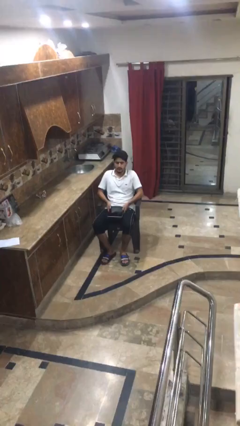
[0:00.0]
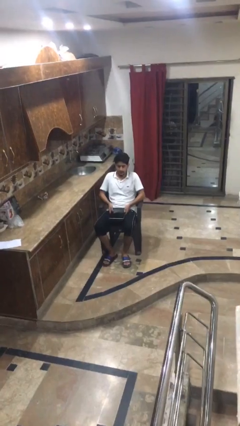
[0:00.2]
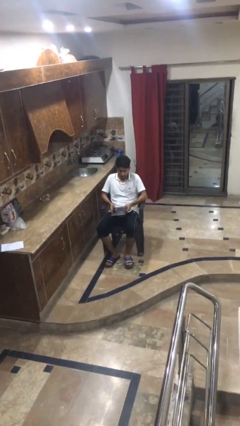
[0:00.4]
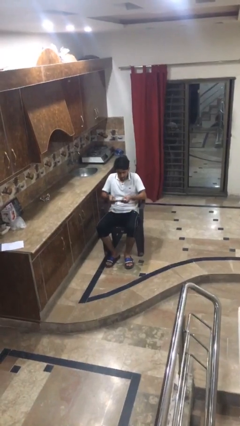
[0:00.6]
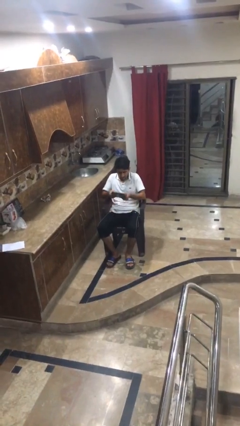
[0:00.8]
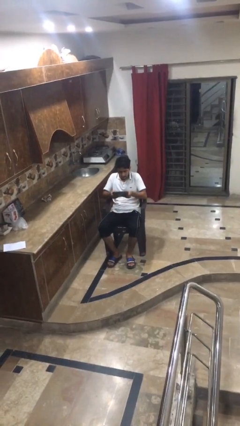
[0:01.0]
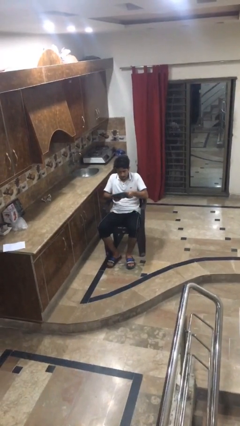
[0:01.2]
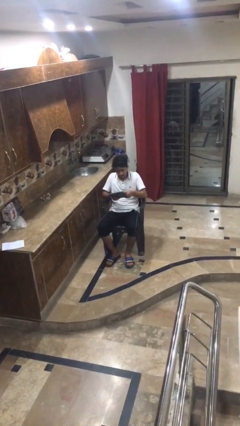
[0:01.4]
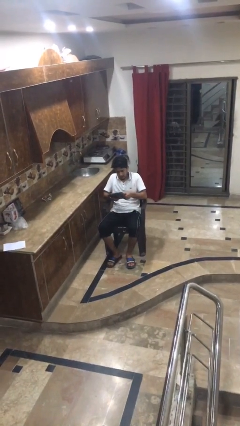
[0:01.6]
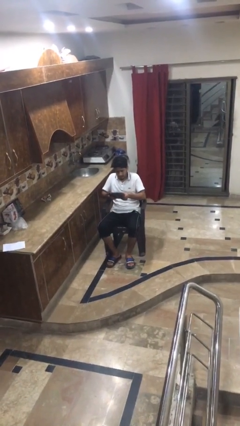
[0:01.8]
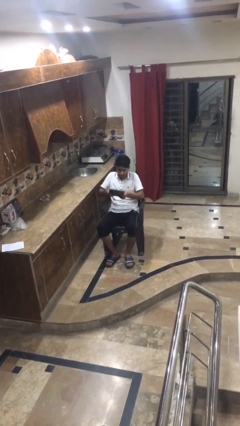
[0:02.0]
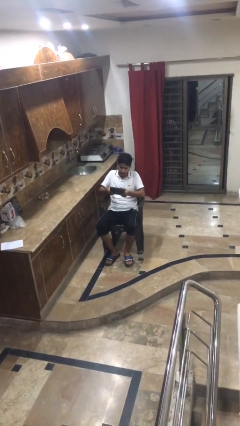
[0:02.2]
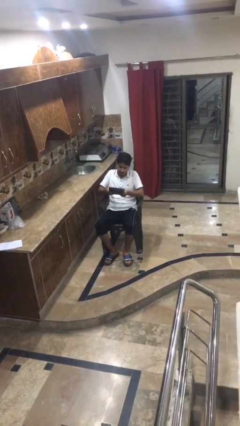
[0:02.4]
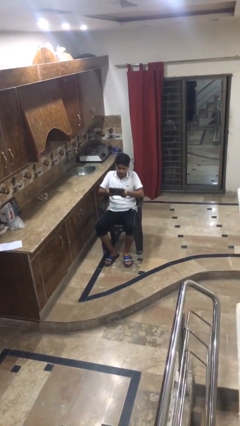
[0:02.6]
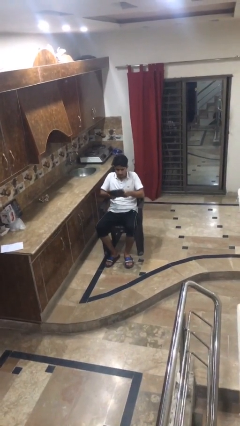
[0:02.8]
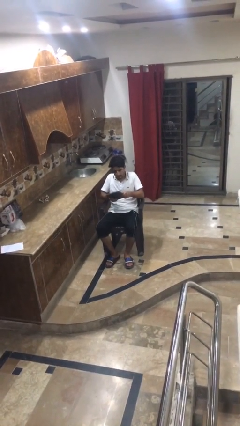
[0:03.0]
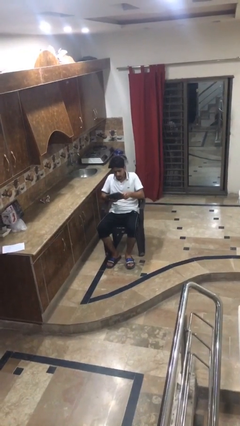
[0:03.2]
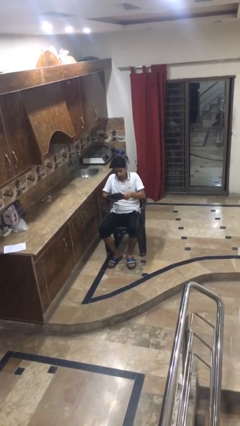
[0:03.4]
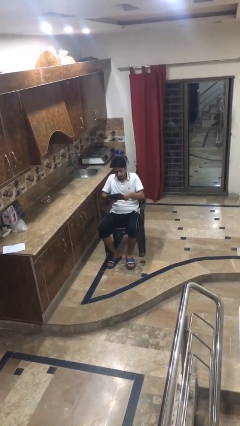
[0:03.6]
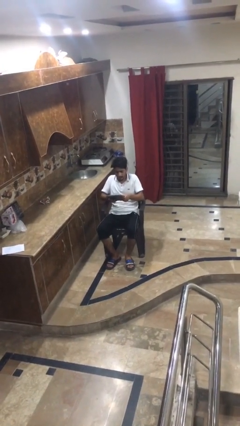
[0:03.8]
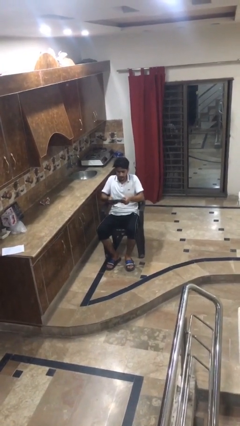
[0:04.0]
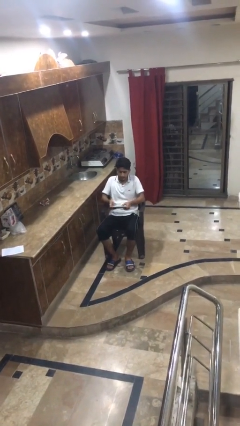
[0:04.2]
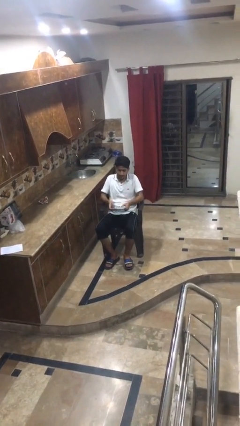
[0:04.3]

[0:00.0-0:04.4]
person interacts with handheld game

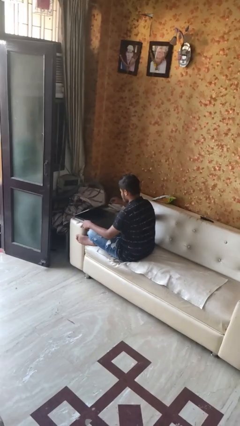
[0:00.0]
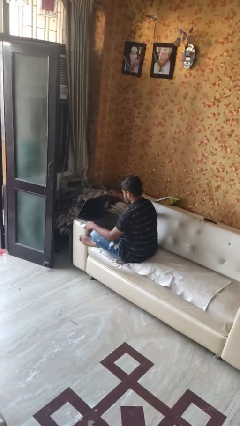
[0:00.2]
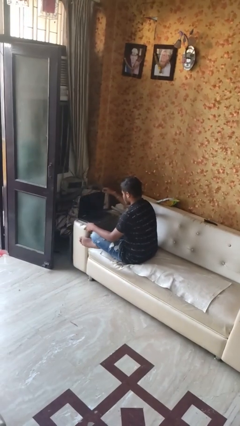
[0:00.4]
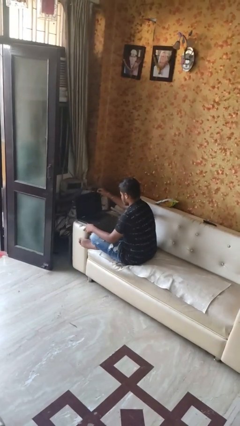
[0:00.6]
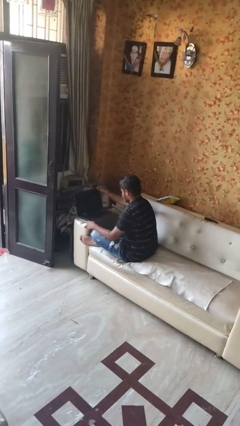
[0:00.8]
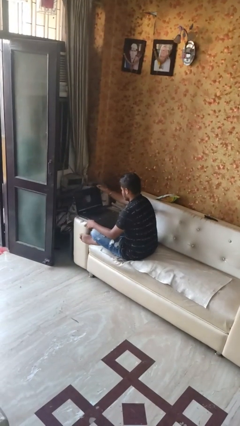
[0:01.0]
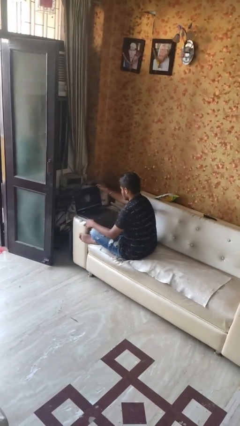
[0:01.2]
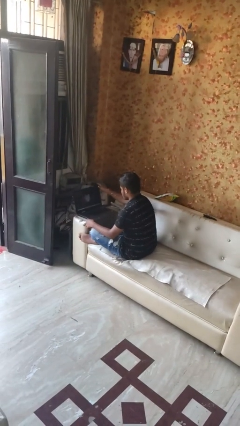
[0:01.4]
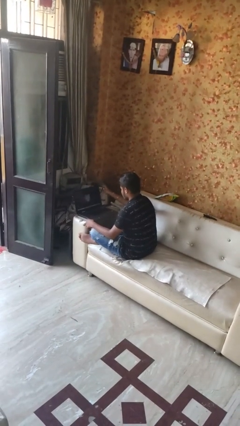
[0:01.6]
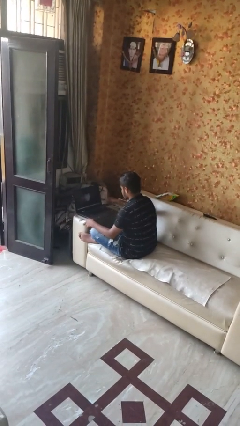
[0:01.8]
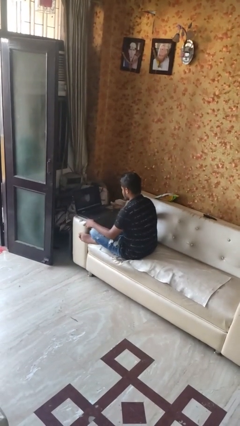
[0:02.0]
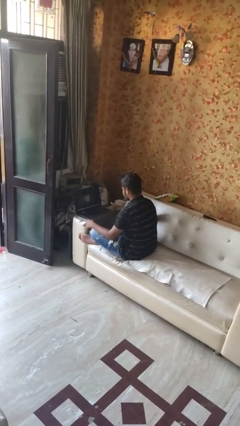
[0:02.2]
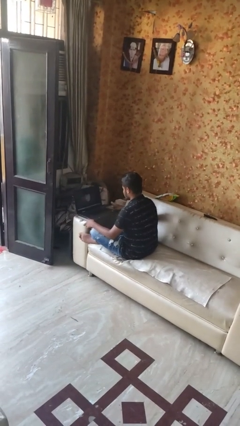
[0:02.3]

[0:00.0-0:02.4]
person opens laptop

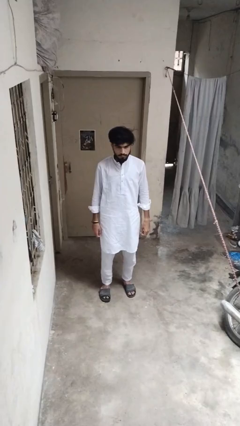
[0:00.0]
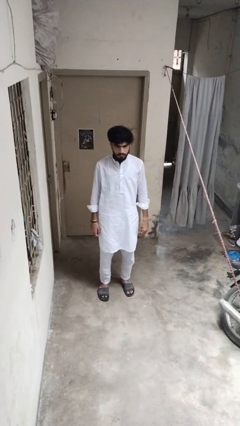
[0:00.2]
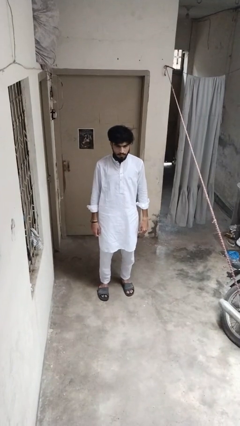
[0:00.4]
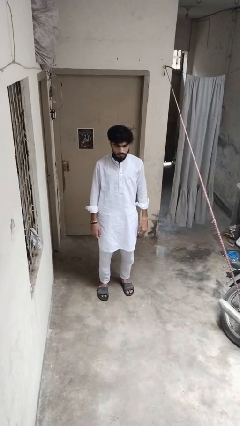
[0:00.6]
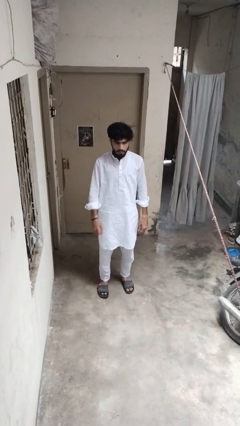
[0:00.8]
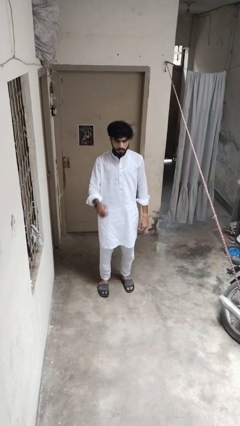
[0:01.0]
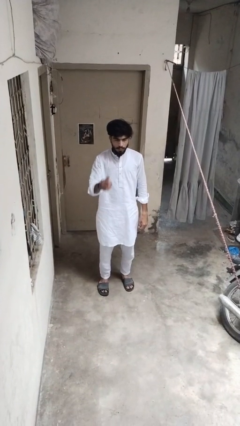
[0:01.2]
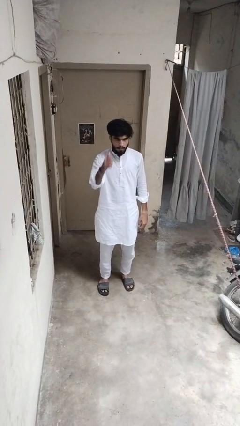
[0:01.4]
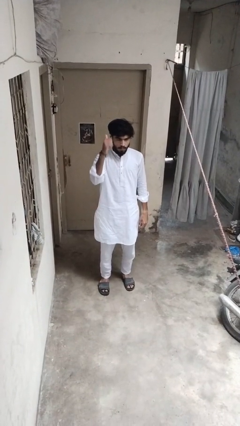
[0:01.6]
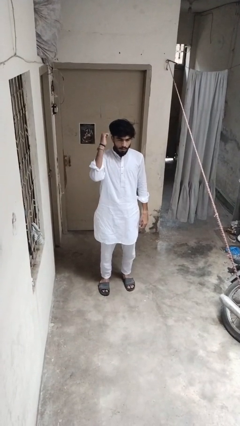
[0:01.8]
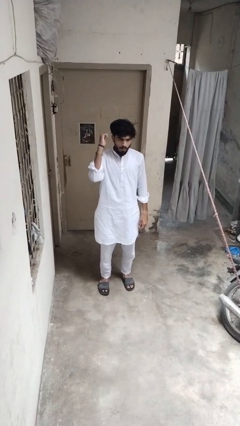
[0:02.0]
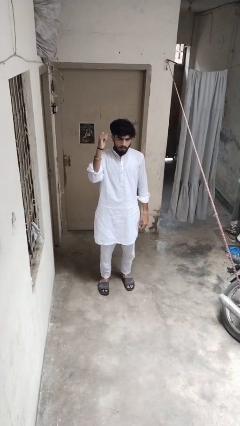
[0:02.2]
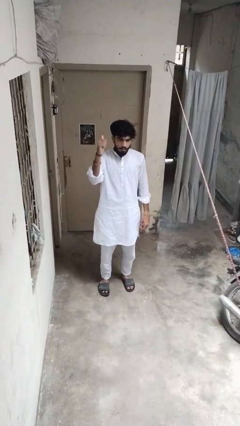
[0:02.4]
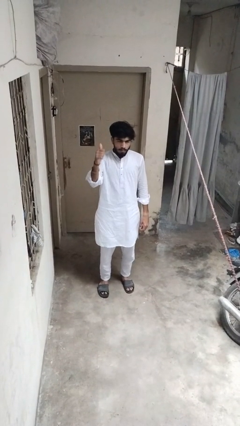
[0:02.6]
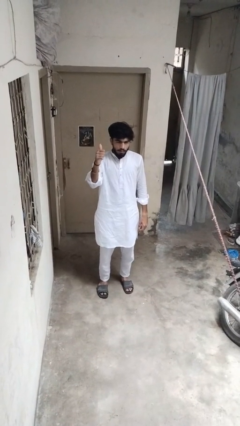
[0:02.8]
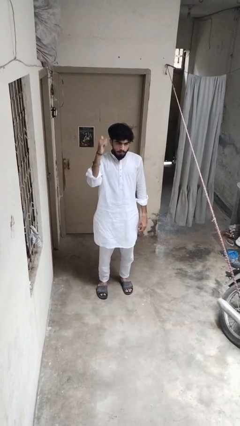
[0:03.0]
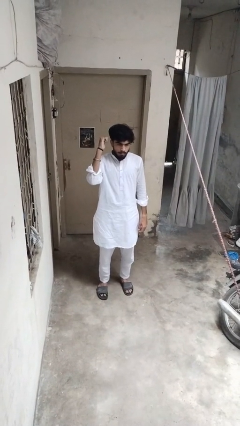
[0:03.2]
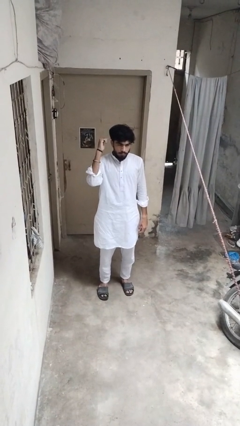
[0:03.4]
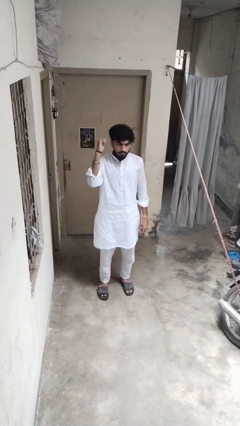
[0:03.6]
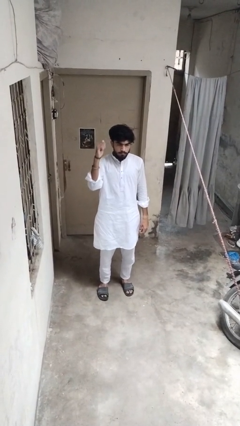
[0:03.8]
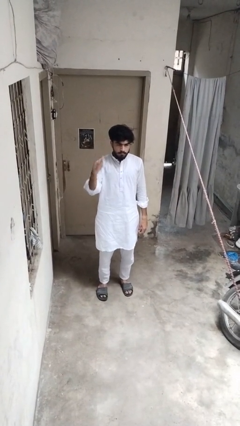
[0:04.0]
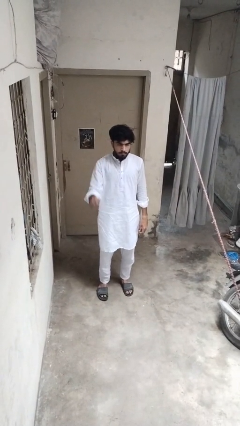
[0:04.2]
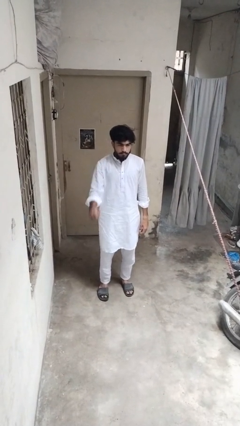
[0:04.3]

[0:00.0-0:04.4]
person gestures behind me

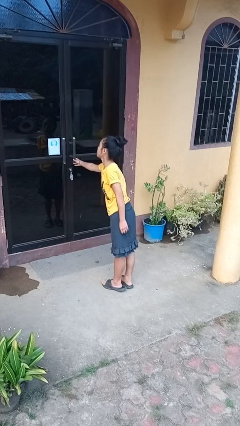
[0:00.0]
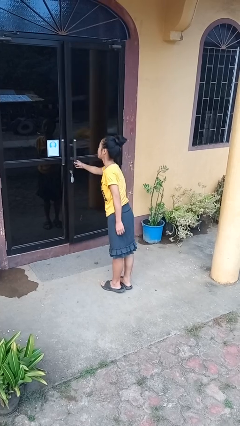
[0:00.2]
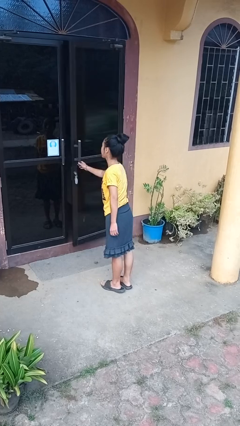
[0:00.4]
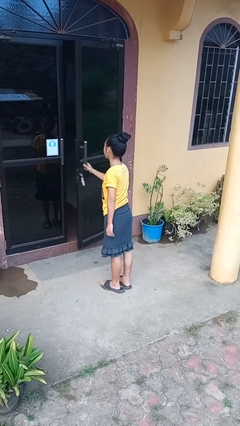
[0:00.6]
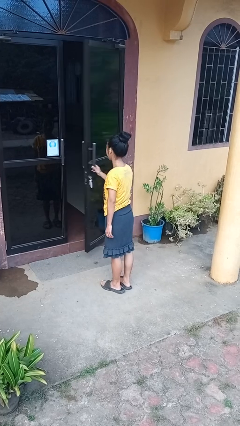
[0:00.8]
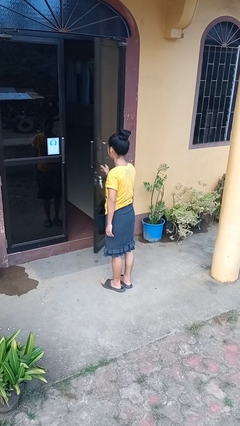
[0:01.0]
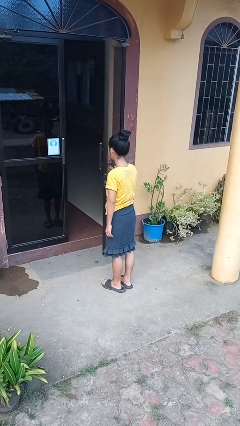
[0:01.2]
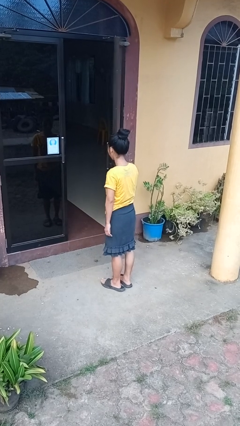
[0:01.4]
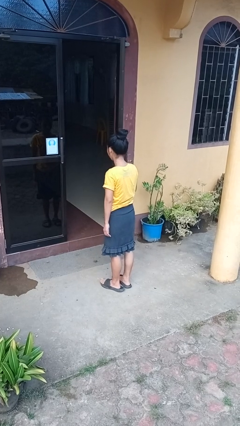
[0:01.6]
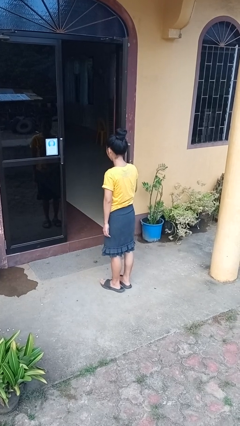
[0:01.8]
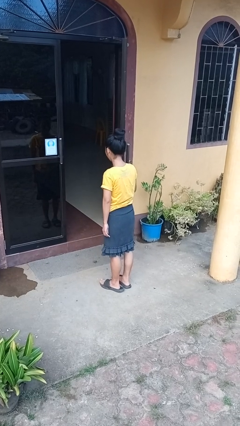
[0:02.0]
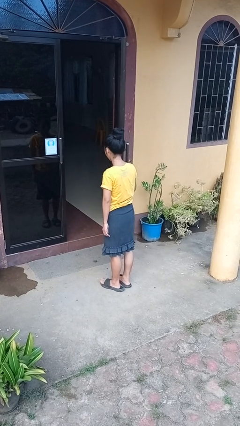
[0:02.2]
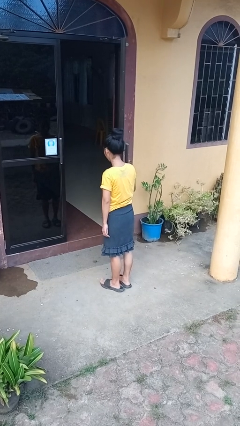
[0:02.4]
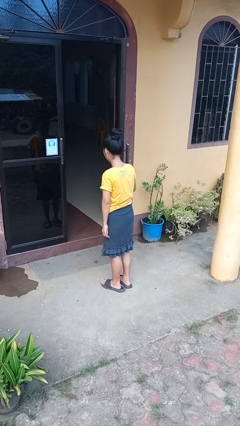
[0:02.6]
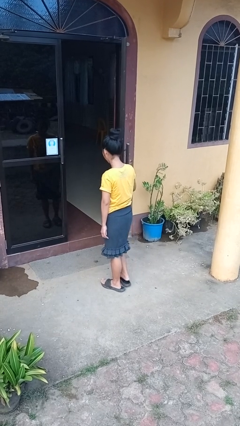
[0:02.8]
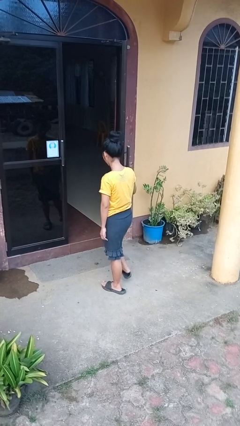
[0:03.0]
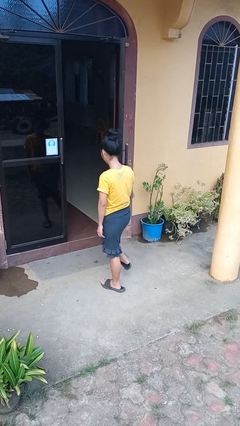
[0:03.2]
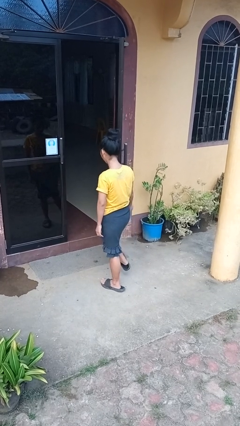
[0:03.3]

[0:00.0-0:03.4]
person opens facility door

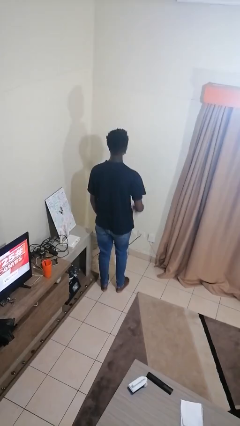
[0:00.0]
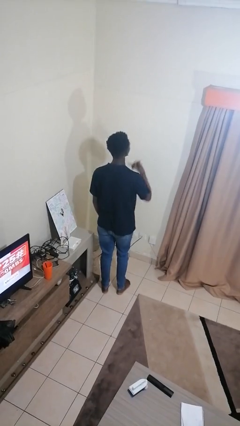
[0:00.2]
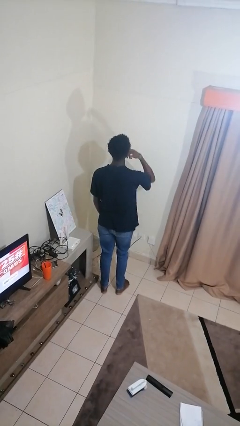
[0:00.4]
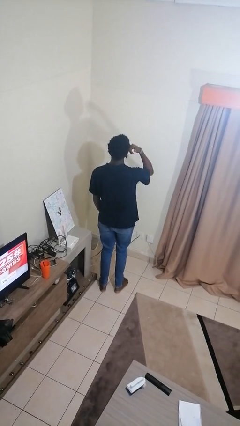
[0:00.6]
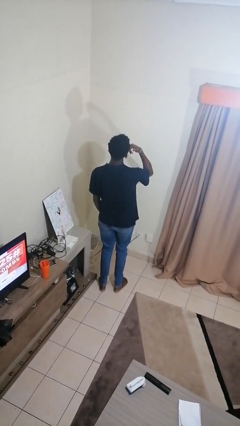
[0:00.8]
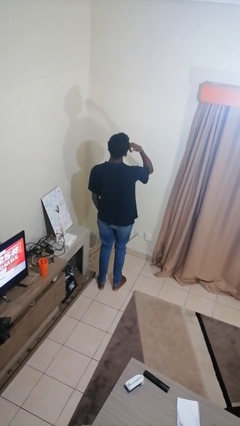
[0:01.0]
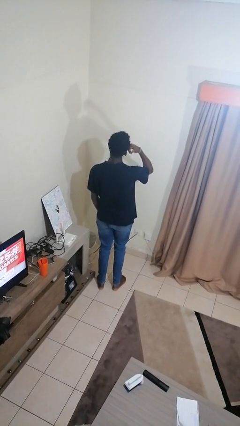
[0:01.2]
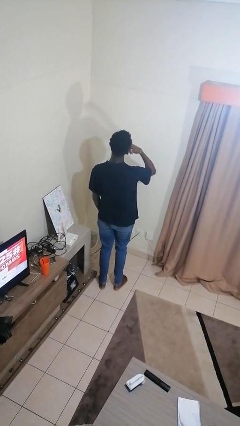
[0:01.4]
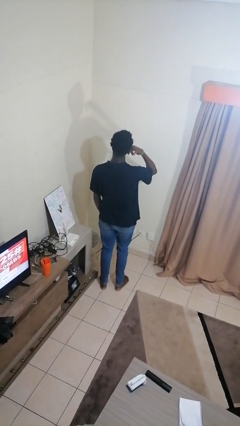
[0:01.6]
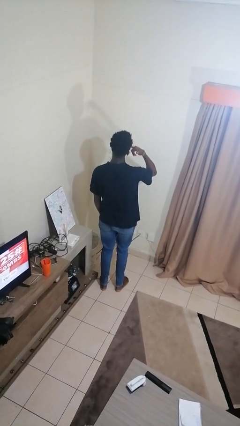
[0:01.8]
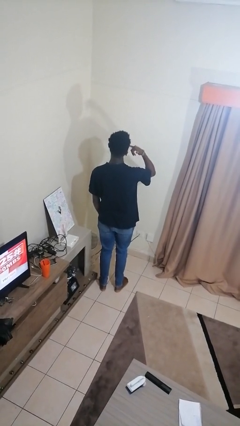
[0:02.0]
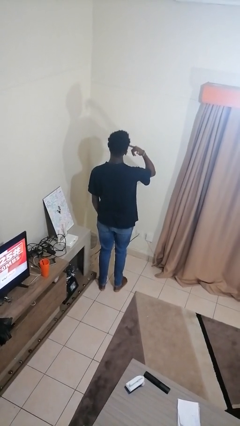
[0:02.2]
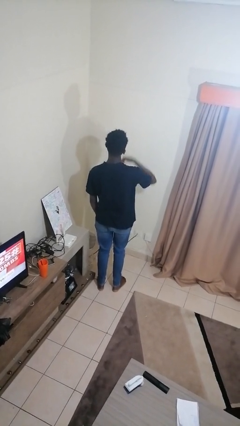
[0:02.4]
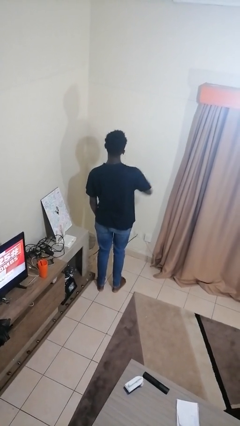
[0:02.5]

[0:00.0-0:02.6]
person gestures call me

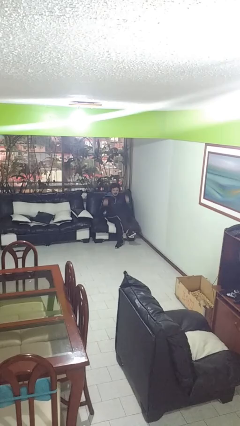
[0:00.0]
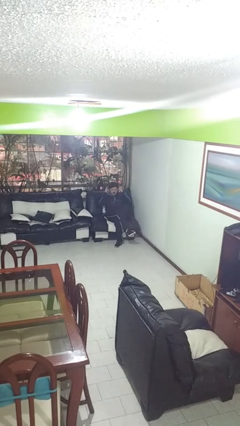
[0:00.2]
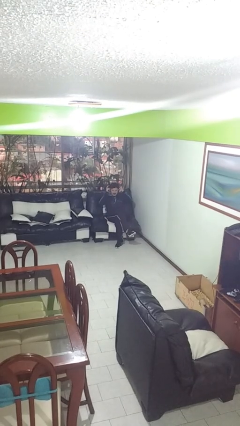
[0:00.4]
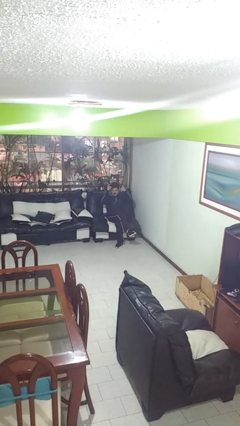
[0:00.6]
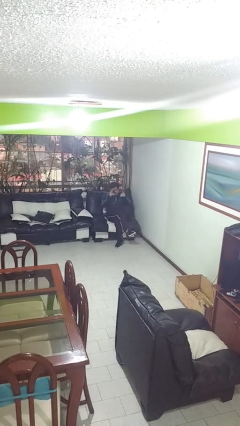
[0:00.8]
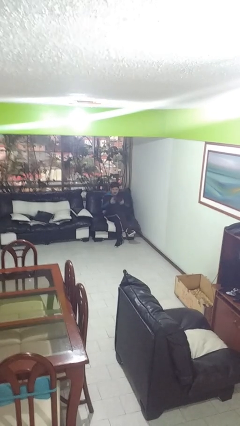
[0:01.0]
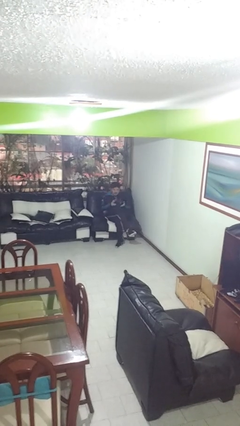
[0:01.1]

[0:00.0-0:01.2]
person takes off headphones
